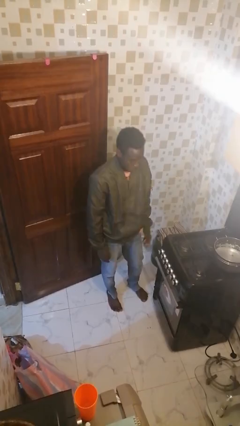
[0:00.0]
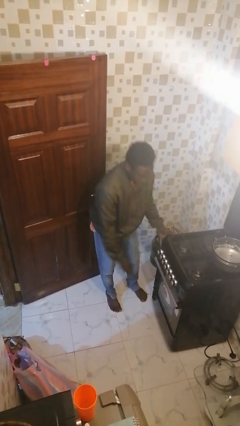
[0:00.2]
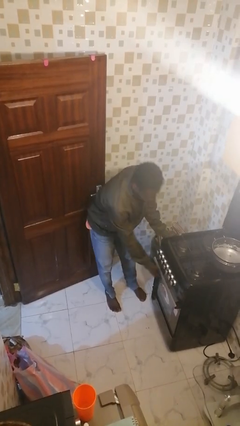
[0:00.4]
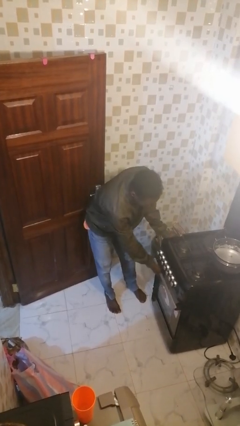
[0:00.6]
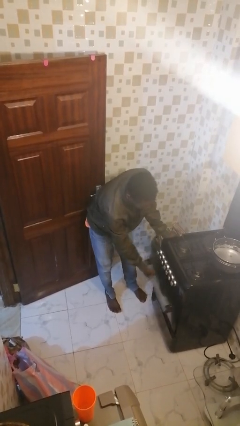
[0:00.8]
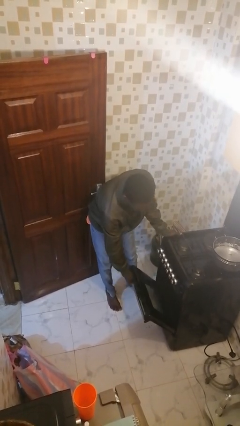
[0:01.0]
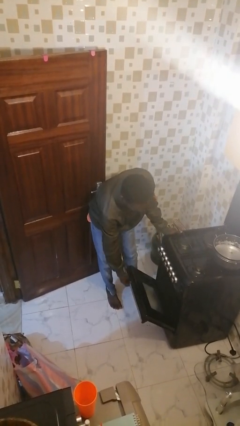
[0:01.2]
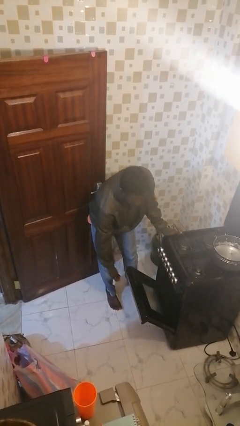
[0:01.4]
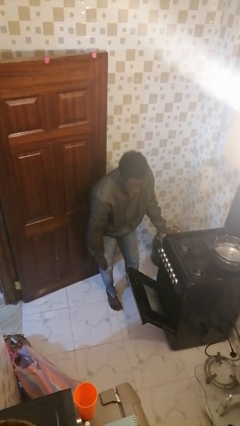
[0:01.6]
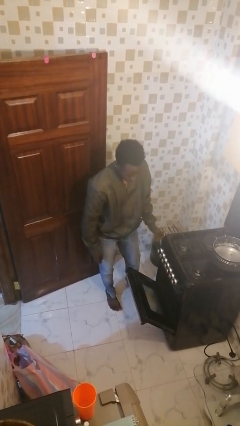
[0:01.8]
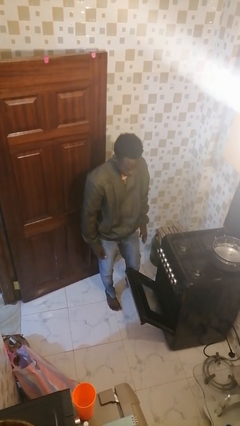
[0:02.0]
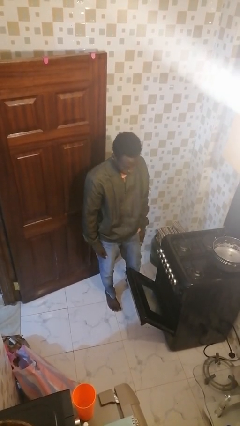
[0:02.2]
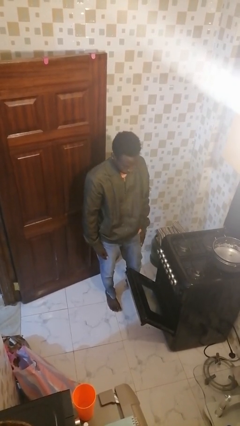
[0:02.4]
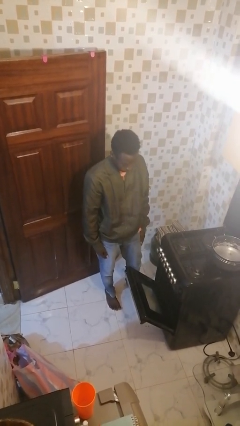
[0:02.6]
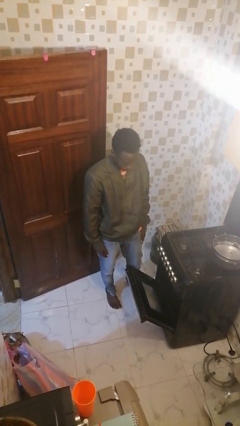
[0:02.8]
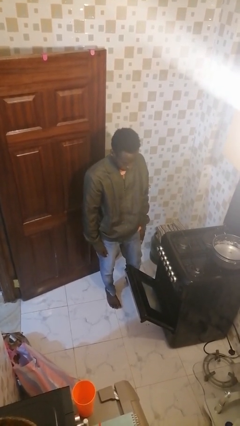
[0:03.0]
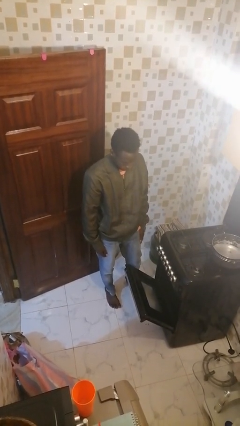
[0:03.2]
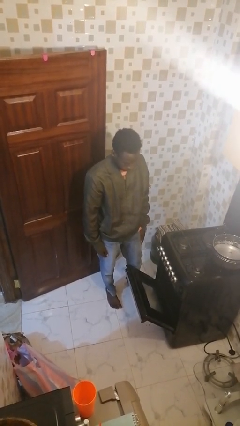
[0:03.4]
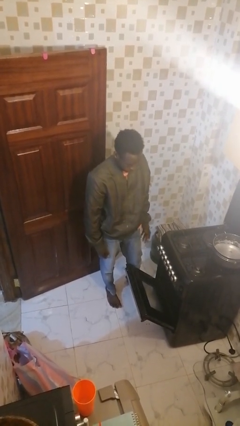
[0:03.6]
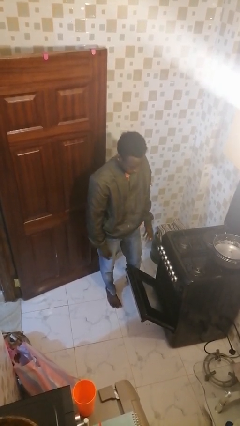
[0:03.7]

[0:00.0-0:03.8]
person opens oven door

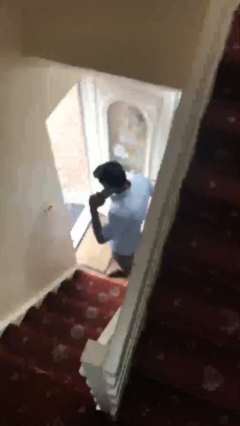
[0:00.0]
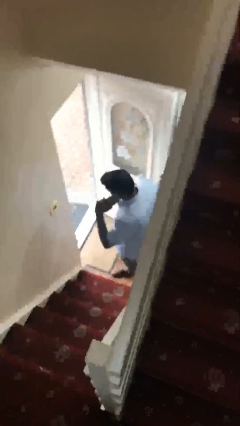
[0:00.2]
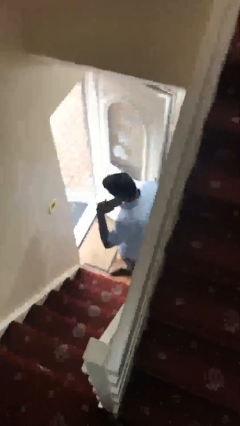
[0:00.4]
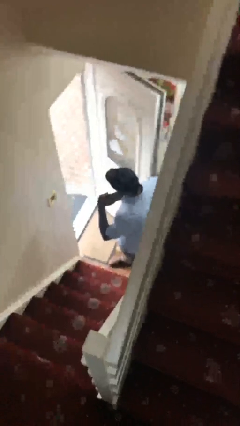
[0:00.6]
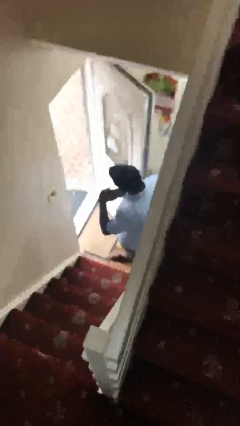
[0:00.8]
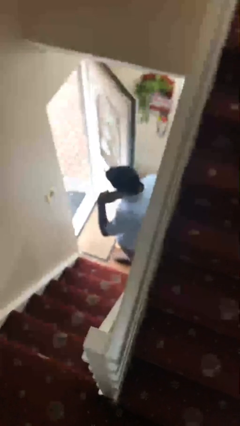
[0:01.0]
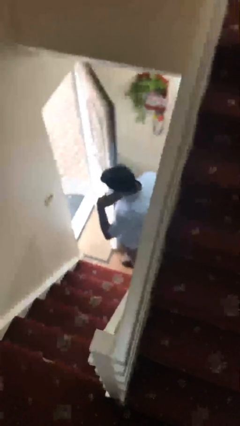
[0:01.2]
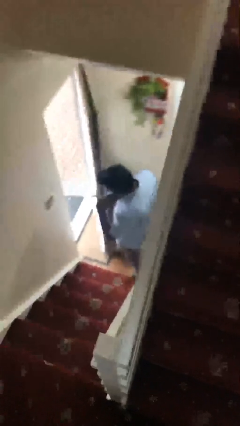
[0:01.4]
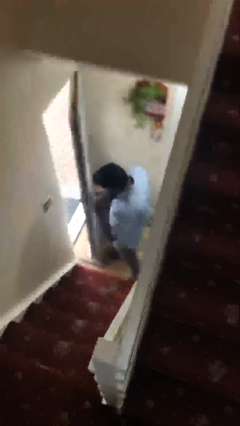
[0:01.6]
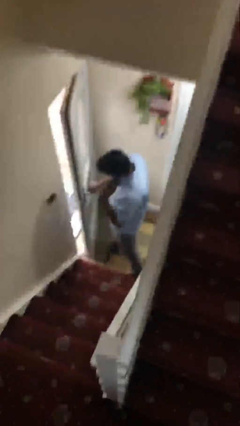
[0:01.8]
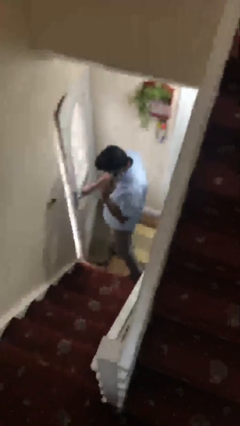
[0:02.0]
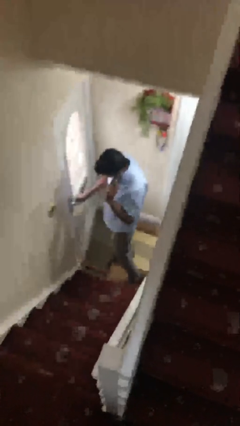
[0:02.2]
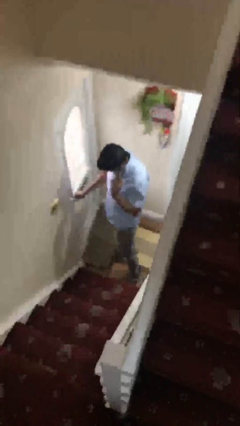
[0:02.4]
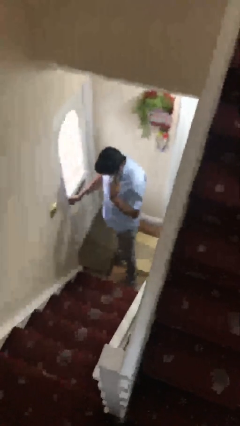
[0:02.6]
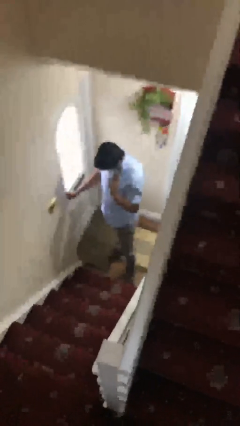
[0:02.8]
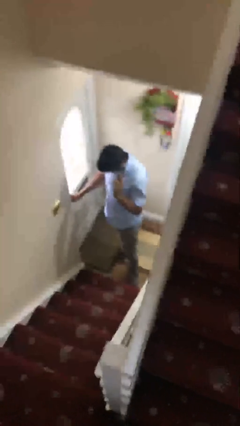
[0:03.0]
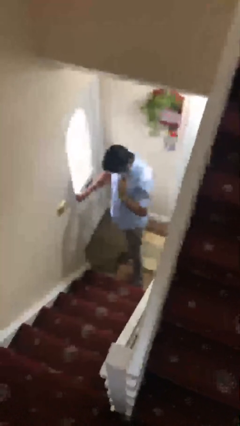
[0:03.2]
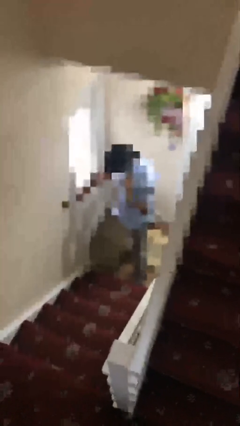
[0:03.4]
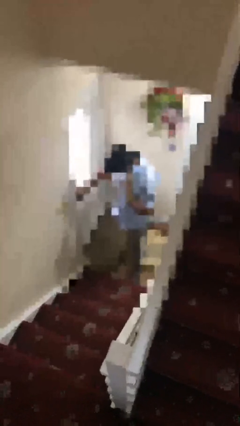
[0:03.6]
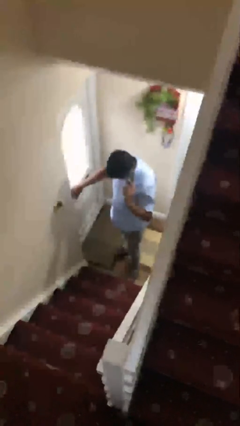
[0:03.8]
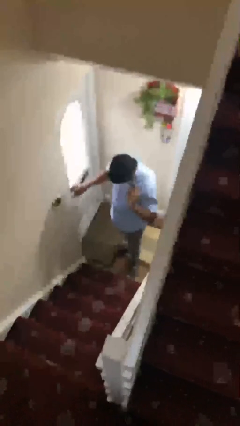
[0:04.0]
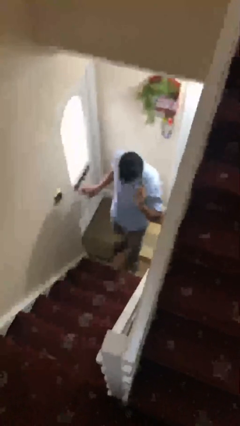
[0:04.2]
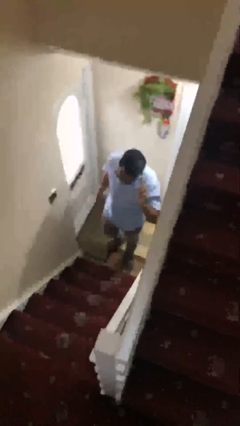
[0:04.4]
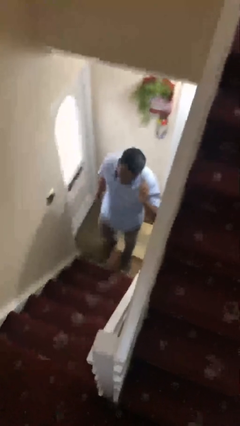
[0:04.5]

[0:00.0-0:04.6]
person closes facility door

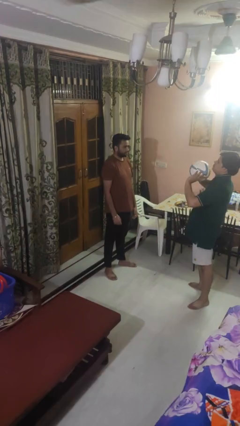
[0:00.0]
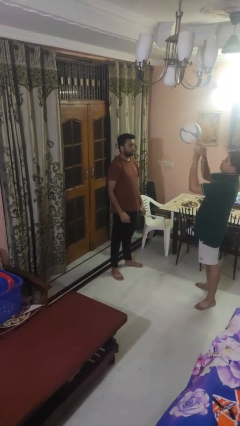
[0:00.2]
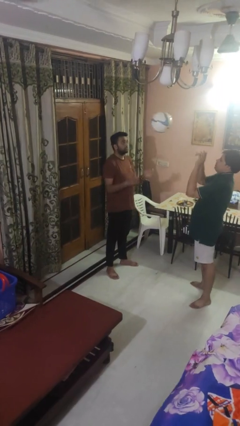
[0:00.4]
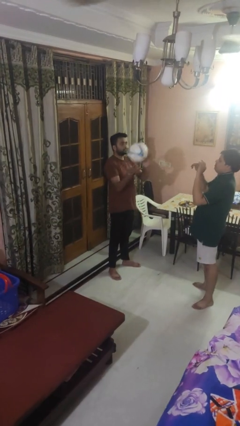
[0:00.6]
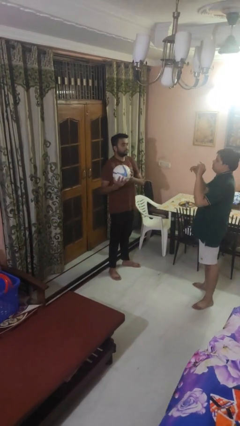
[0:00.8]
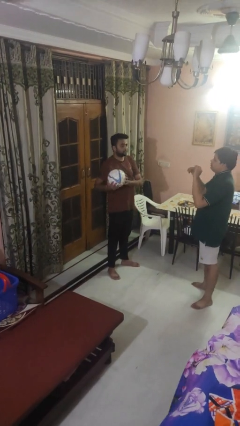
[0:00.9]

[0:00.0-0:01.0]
person catches object from person

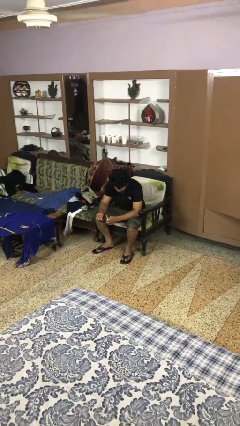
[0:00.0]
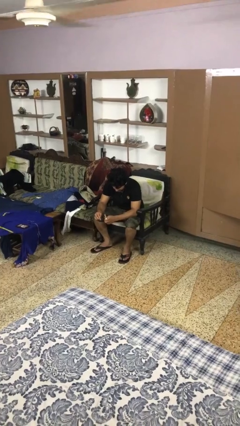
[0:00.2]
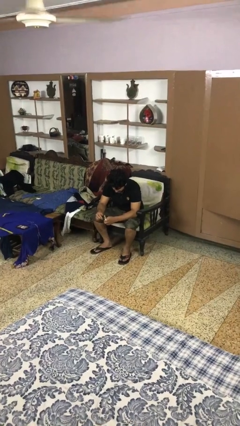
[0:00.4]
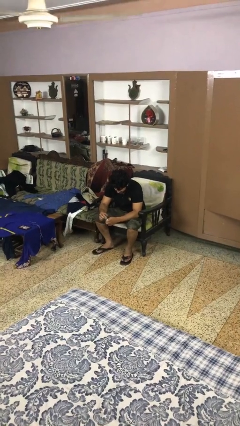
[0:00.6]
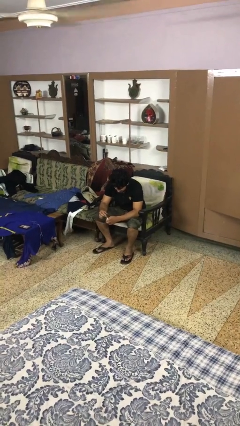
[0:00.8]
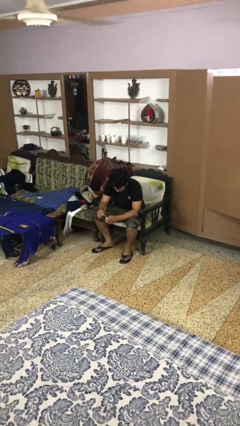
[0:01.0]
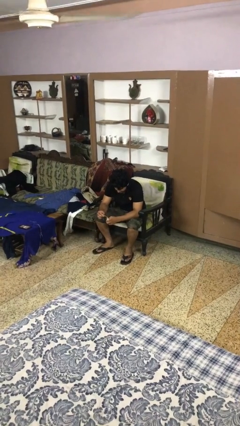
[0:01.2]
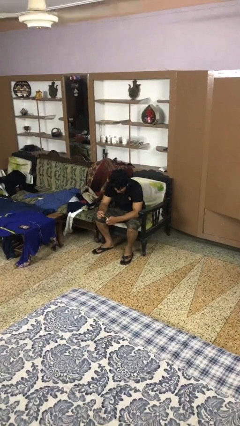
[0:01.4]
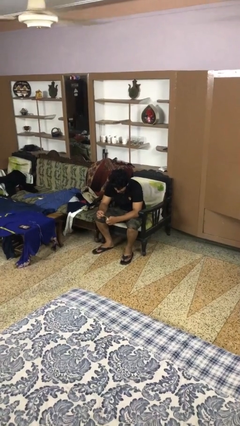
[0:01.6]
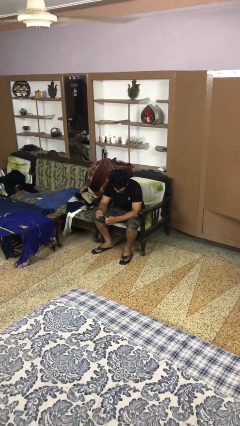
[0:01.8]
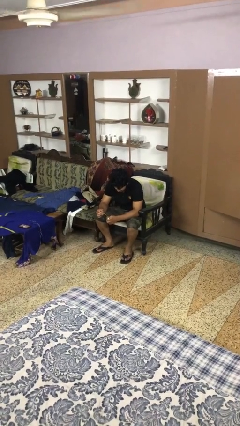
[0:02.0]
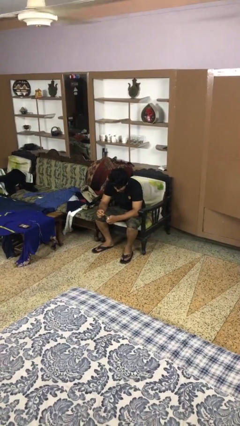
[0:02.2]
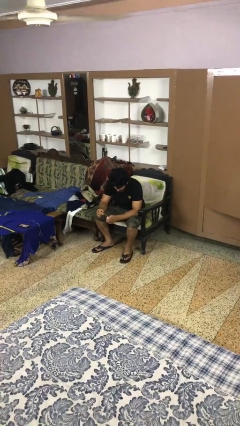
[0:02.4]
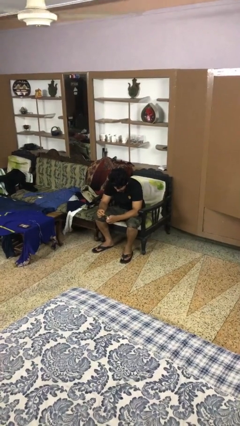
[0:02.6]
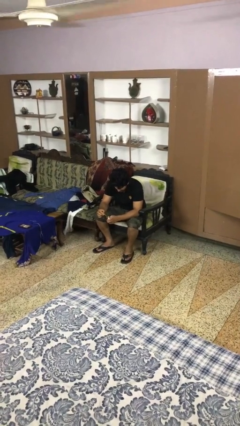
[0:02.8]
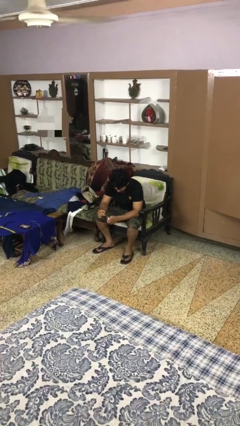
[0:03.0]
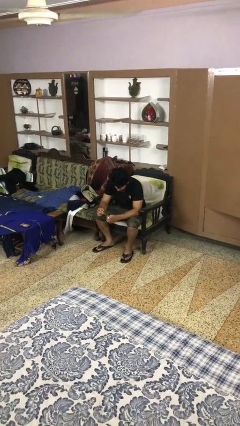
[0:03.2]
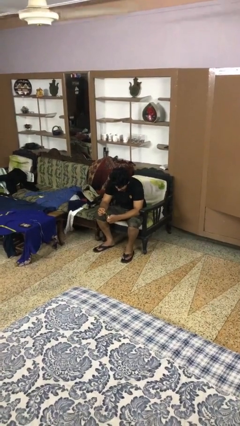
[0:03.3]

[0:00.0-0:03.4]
person paints fingernails

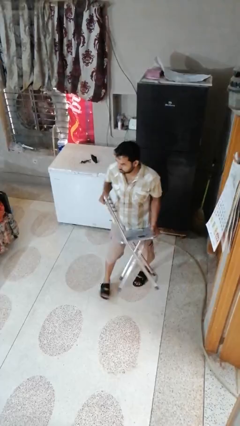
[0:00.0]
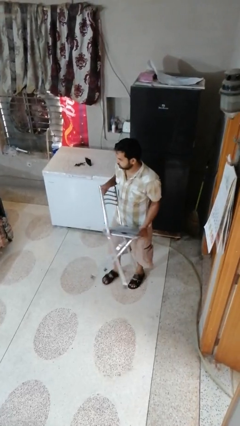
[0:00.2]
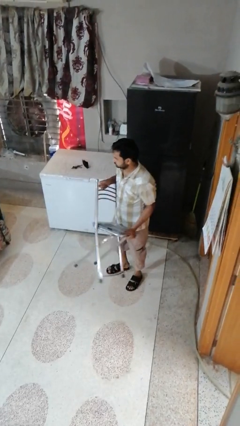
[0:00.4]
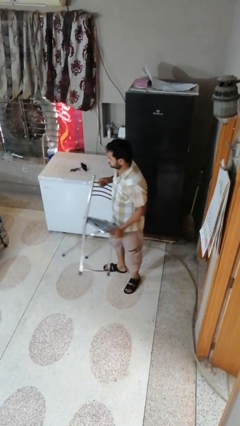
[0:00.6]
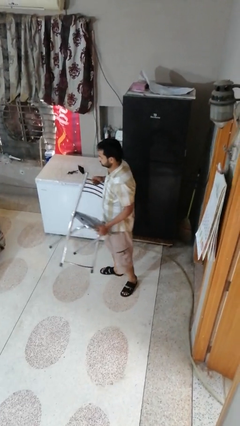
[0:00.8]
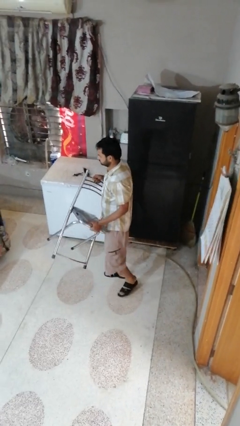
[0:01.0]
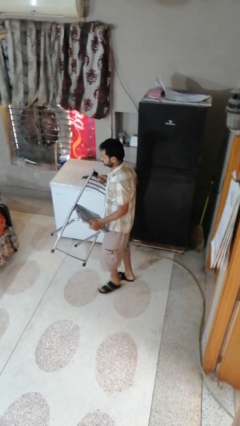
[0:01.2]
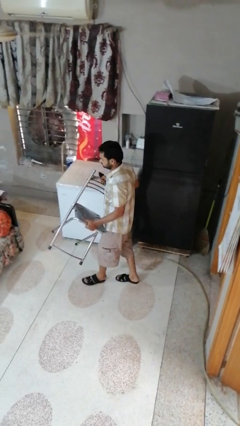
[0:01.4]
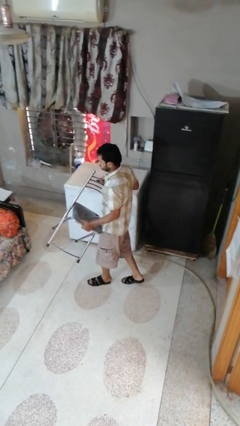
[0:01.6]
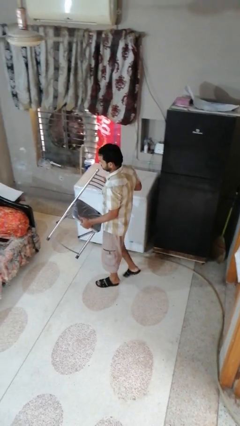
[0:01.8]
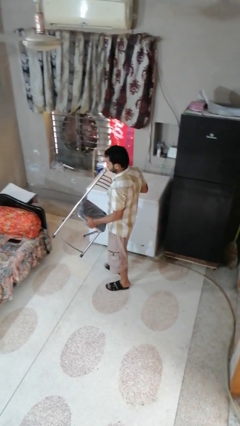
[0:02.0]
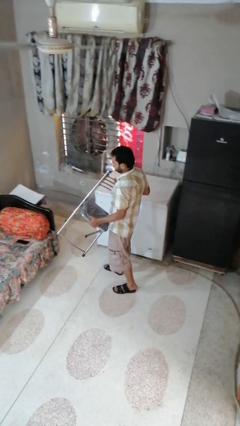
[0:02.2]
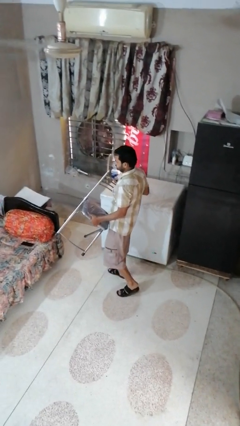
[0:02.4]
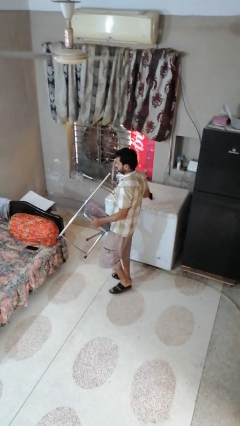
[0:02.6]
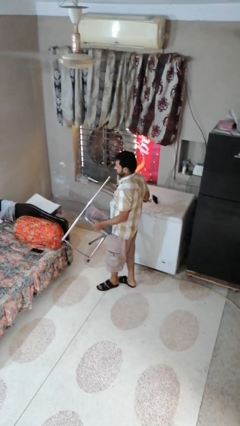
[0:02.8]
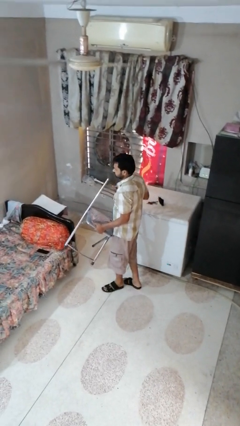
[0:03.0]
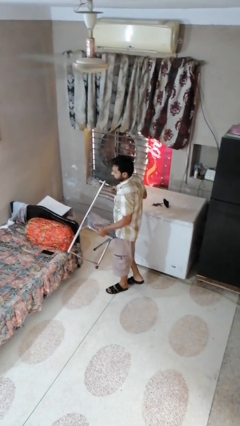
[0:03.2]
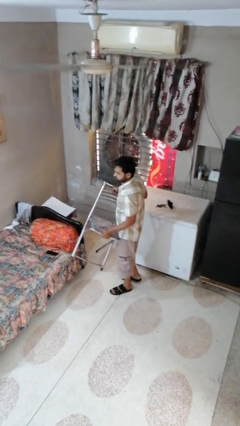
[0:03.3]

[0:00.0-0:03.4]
person carries furniture

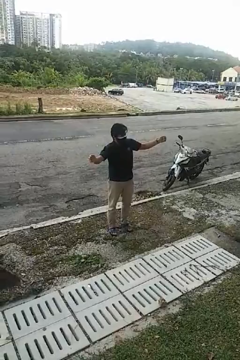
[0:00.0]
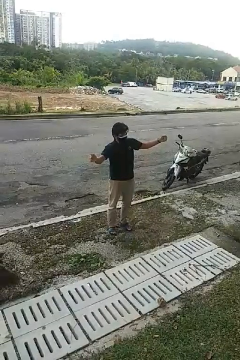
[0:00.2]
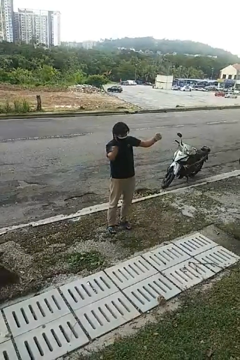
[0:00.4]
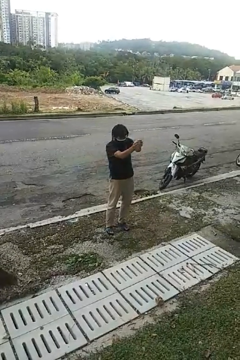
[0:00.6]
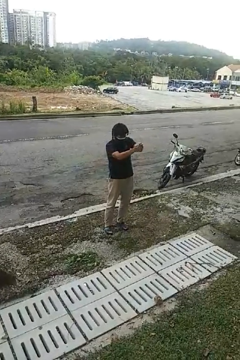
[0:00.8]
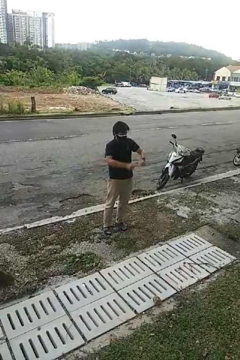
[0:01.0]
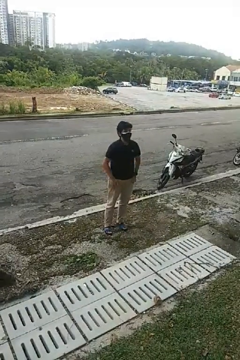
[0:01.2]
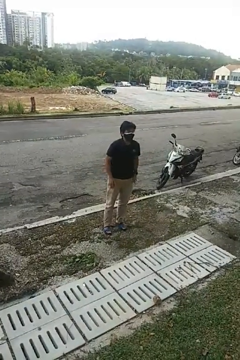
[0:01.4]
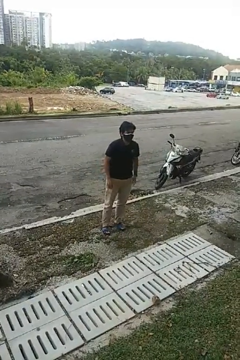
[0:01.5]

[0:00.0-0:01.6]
person gestures zoom out
